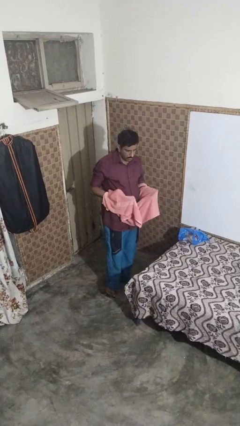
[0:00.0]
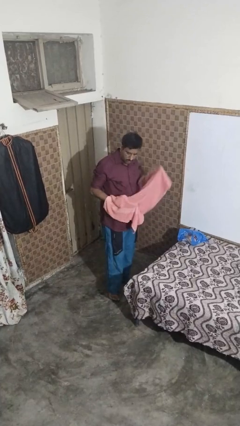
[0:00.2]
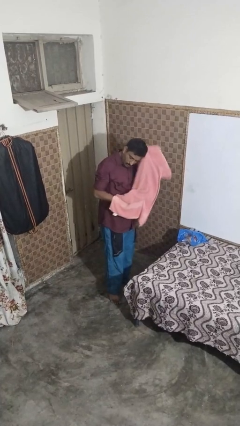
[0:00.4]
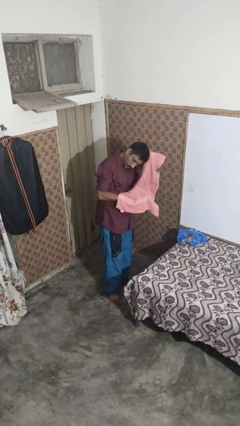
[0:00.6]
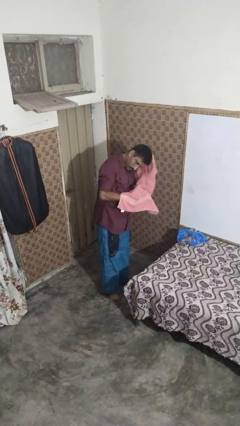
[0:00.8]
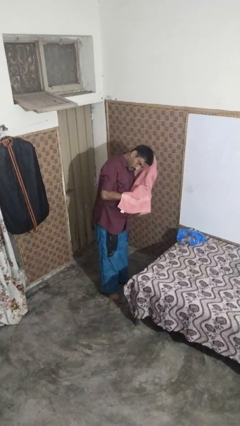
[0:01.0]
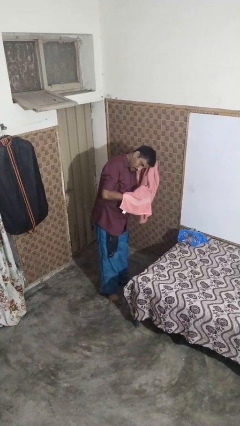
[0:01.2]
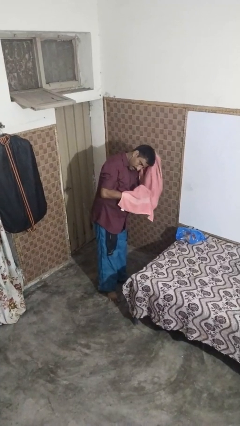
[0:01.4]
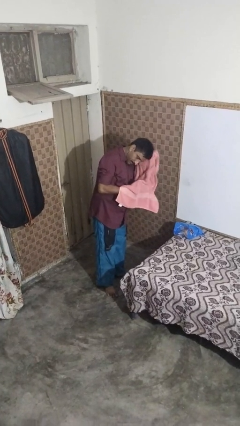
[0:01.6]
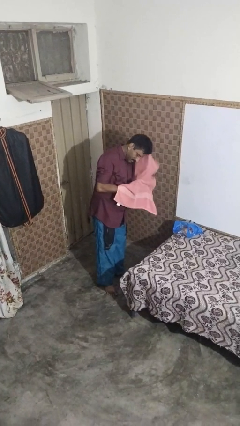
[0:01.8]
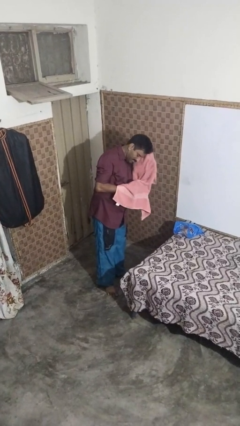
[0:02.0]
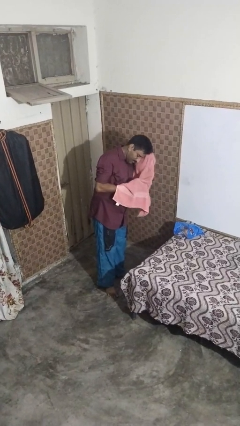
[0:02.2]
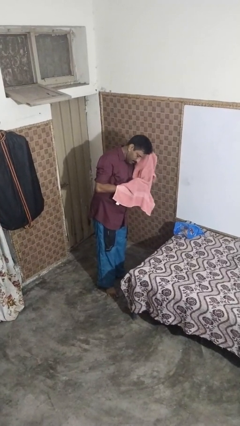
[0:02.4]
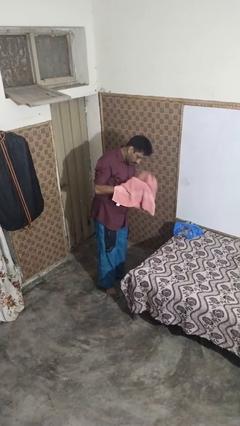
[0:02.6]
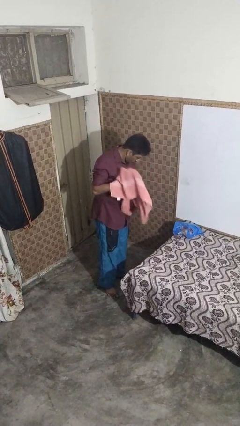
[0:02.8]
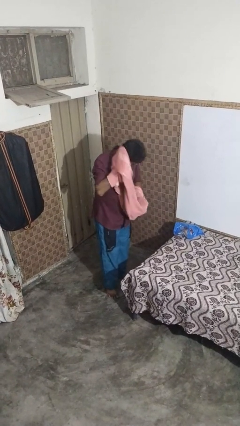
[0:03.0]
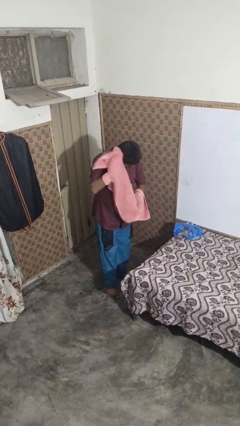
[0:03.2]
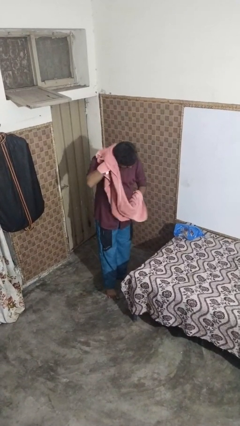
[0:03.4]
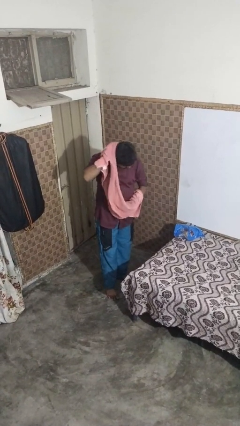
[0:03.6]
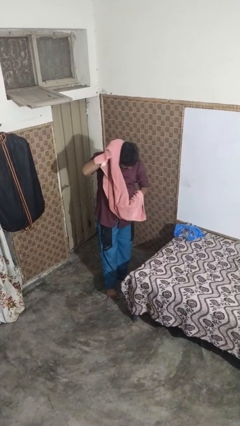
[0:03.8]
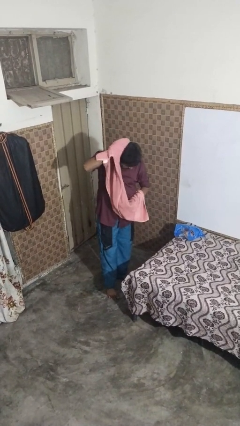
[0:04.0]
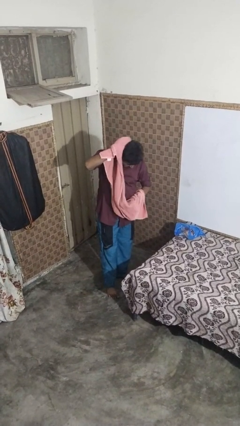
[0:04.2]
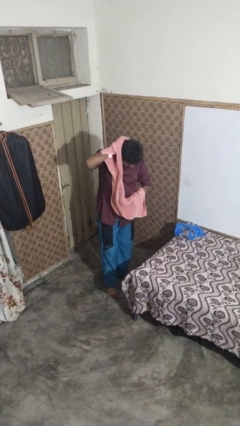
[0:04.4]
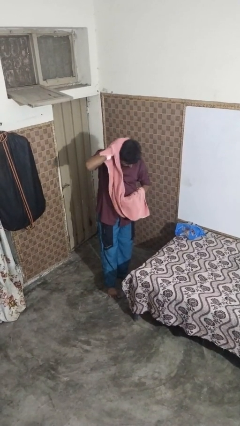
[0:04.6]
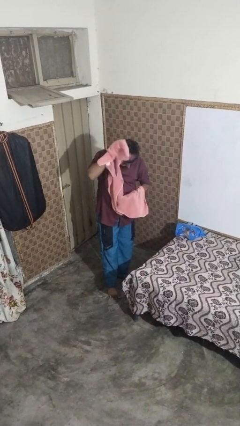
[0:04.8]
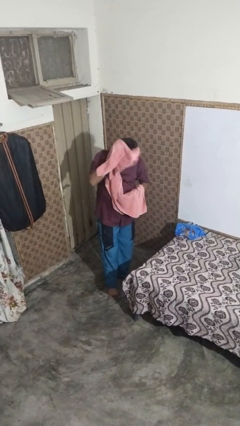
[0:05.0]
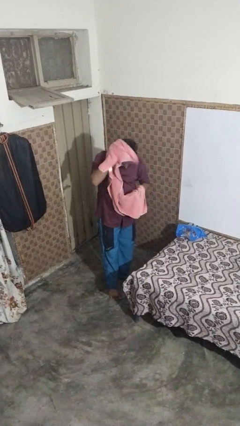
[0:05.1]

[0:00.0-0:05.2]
person dries hair with towel

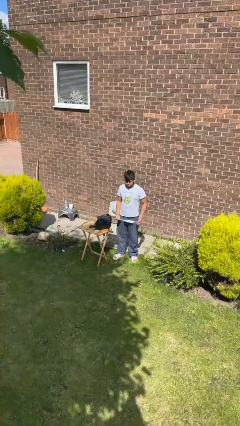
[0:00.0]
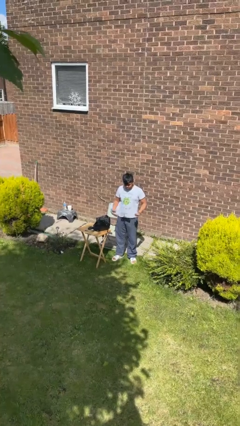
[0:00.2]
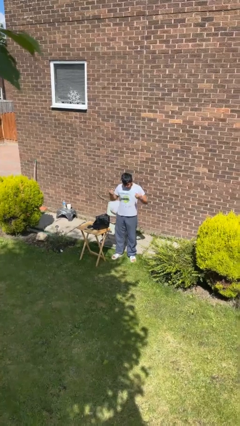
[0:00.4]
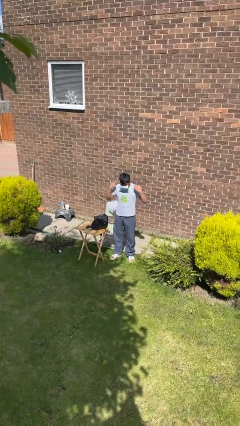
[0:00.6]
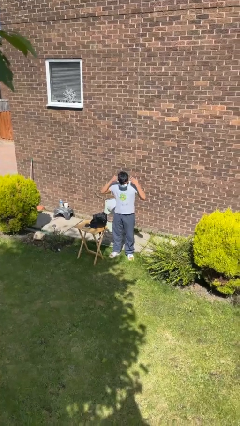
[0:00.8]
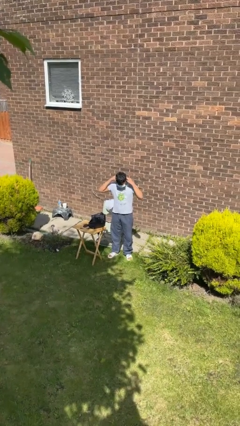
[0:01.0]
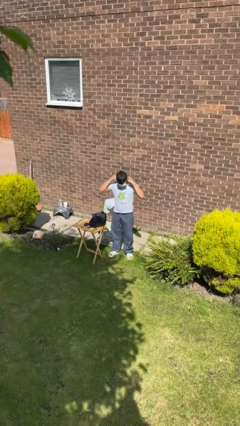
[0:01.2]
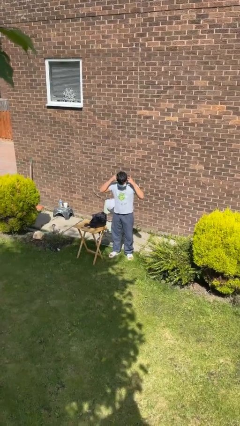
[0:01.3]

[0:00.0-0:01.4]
person puts on facemask

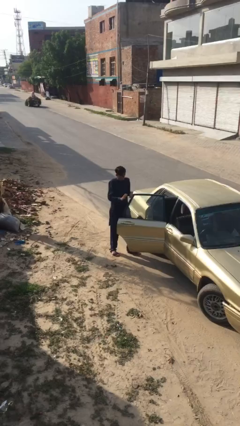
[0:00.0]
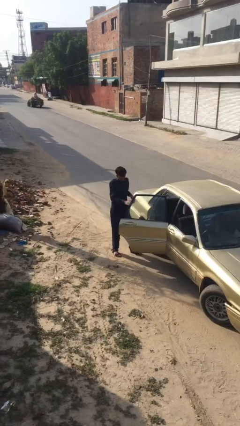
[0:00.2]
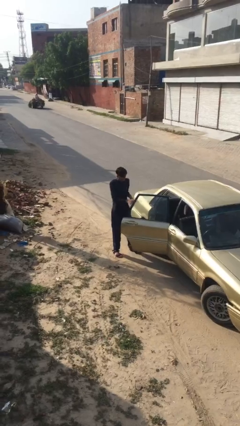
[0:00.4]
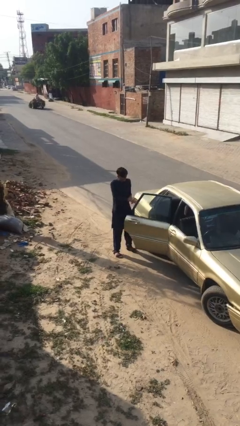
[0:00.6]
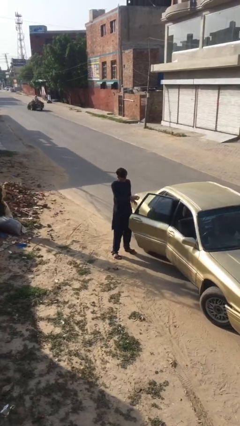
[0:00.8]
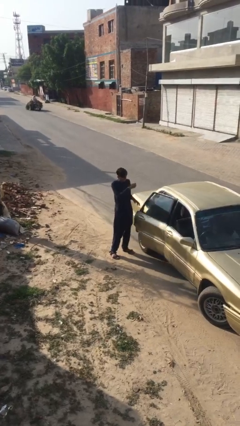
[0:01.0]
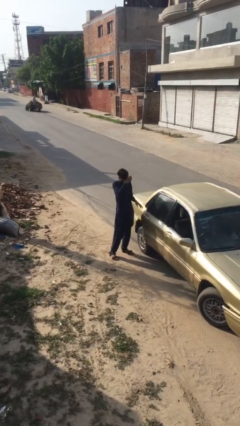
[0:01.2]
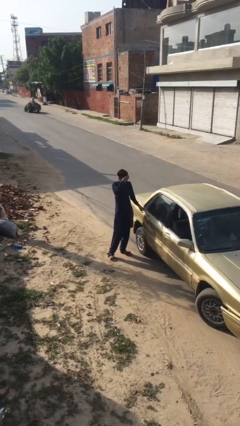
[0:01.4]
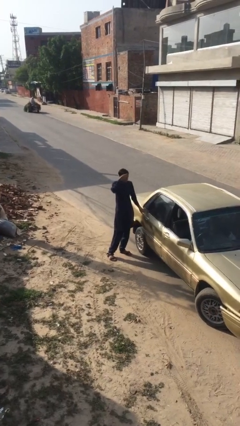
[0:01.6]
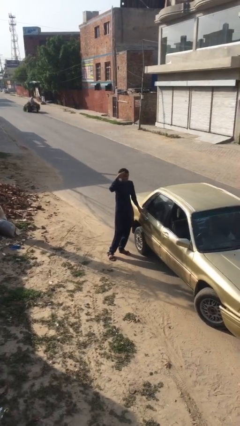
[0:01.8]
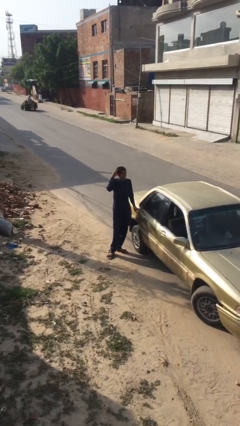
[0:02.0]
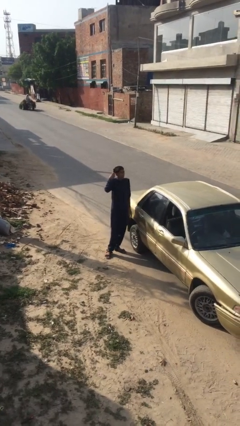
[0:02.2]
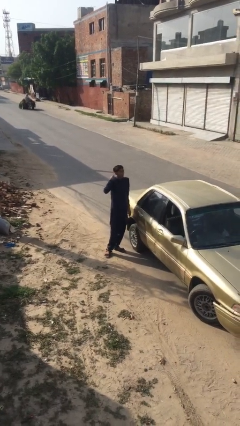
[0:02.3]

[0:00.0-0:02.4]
person closes car door

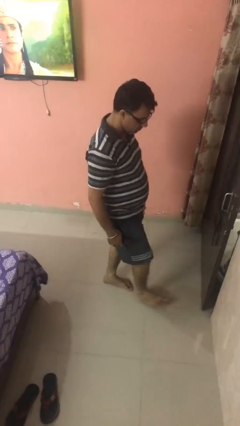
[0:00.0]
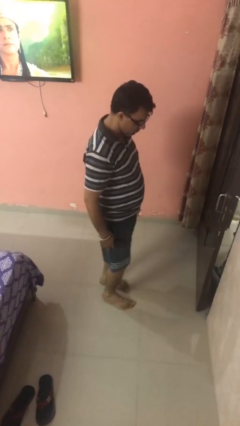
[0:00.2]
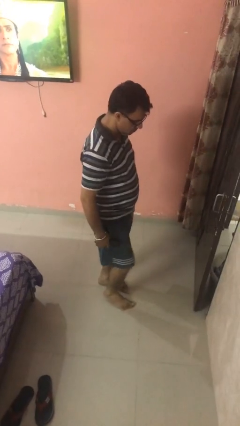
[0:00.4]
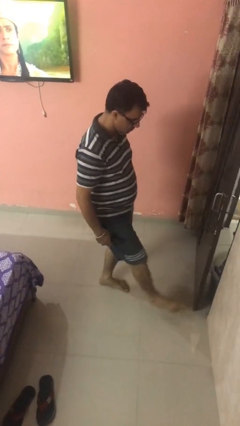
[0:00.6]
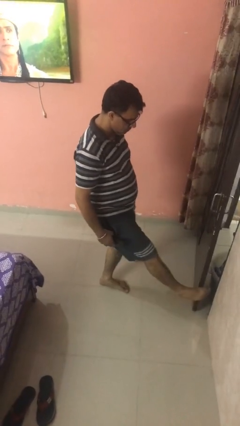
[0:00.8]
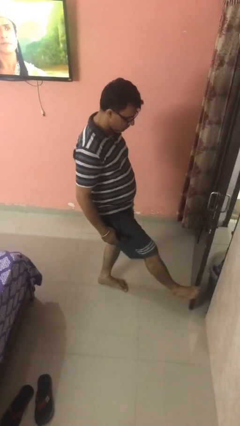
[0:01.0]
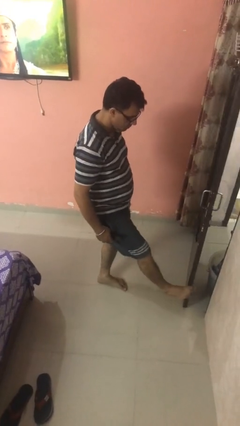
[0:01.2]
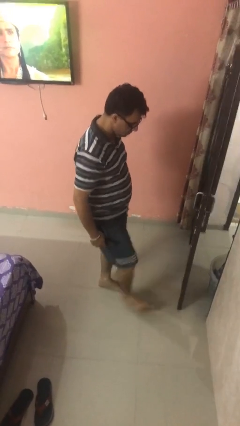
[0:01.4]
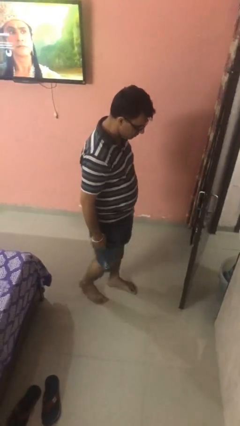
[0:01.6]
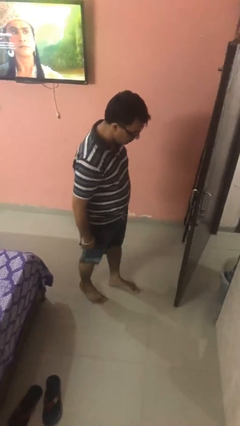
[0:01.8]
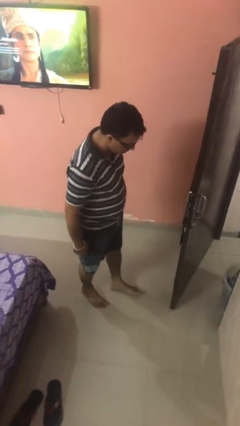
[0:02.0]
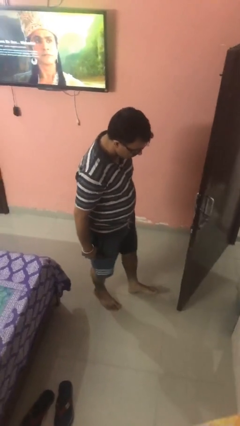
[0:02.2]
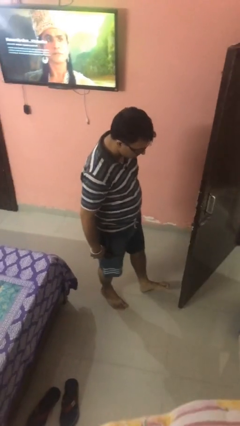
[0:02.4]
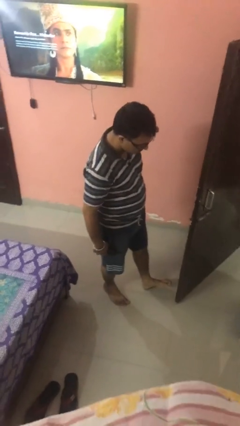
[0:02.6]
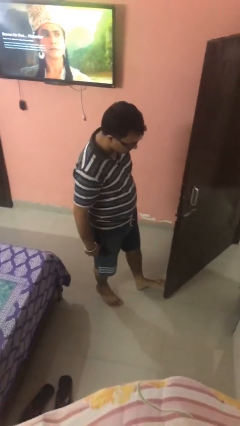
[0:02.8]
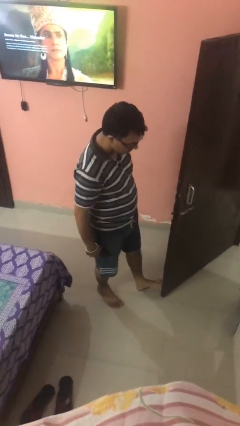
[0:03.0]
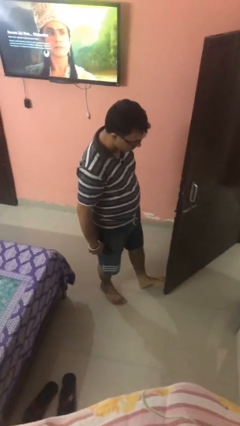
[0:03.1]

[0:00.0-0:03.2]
person opens facility door

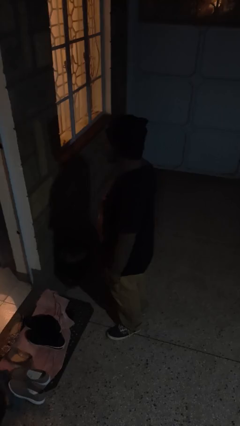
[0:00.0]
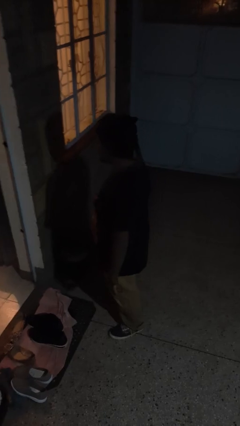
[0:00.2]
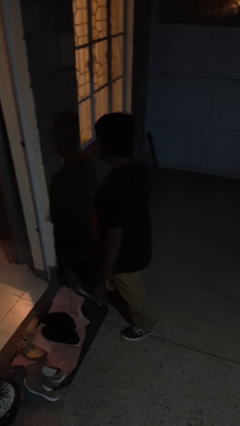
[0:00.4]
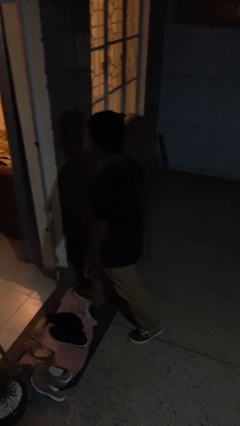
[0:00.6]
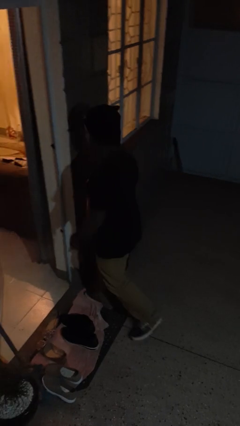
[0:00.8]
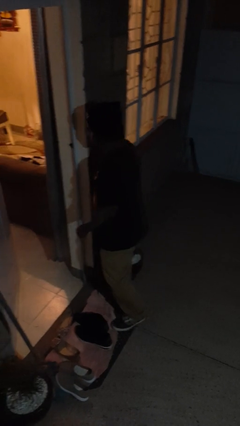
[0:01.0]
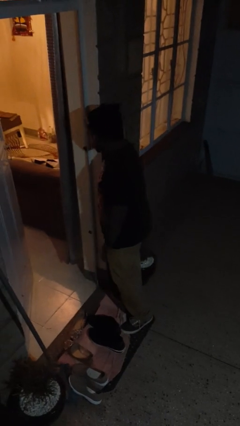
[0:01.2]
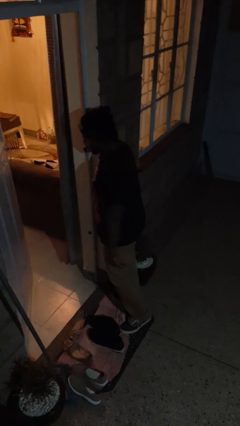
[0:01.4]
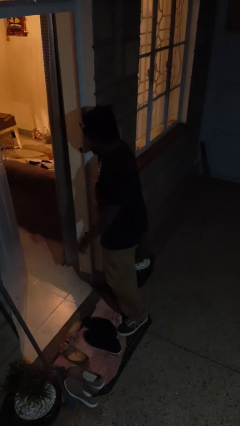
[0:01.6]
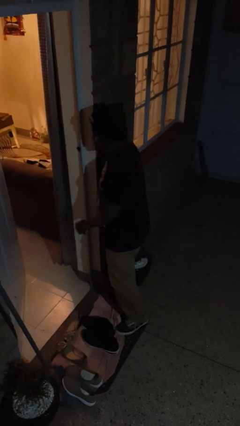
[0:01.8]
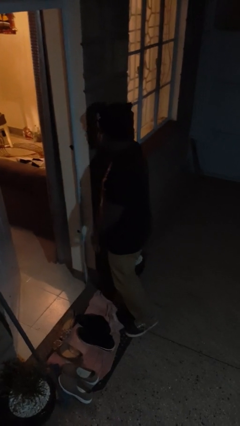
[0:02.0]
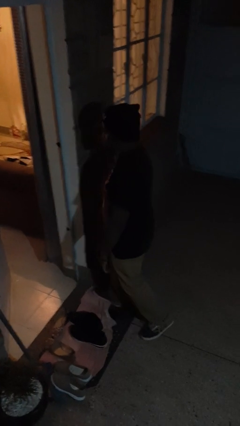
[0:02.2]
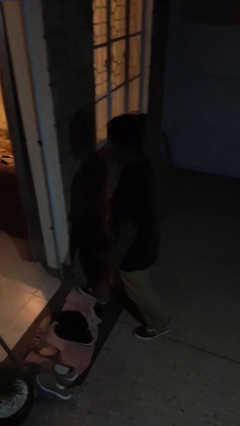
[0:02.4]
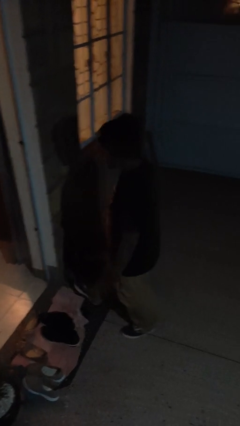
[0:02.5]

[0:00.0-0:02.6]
person bumps into wall

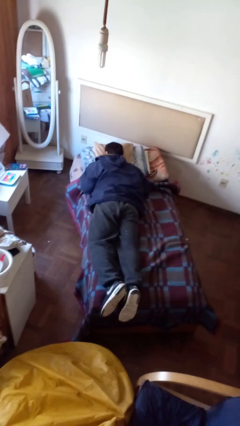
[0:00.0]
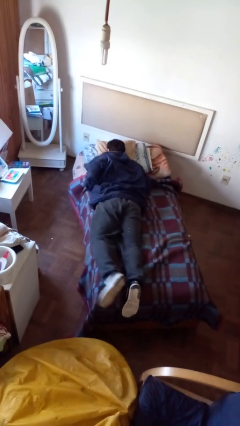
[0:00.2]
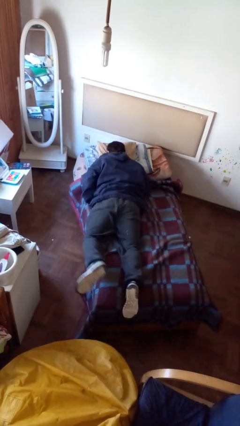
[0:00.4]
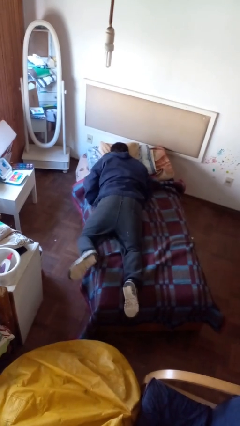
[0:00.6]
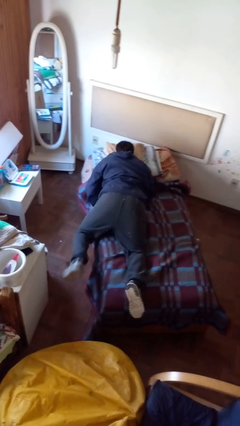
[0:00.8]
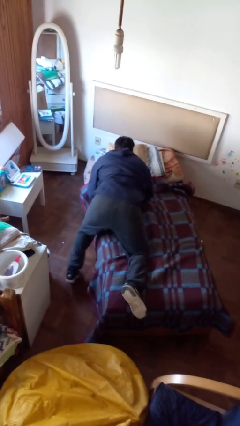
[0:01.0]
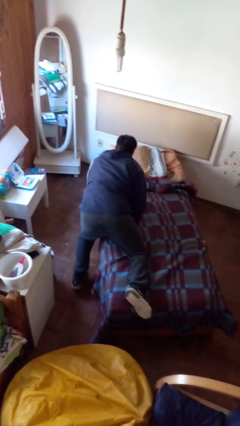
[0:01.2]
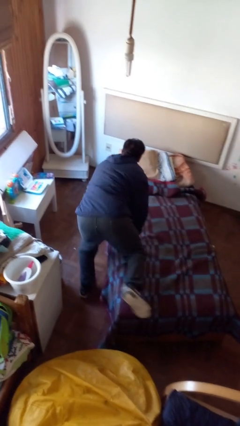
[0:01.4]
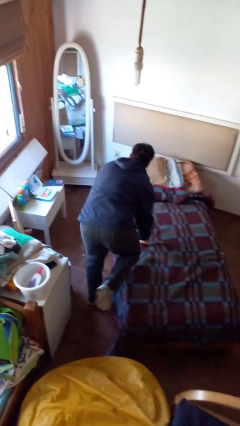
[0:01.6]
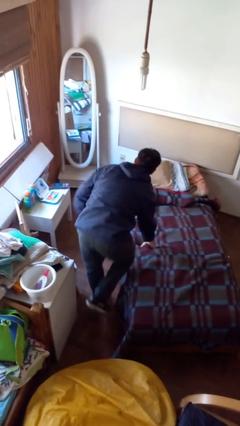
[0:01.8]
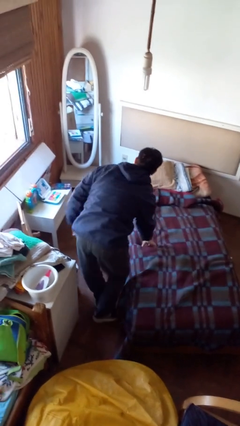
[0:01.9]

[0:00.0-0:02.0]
person stands up
